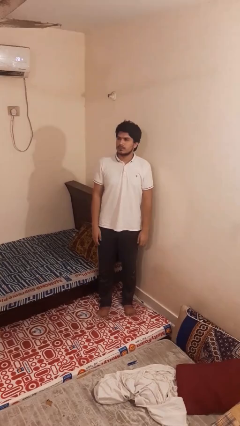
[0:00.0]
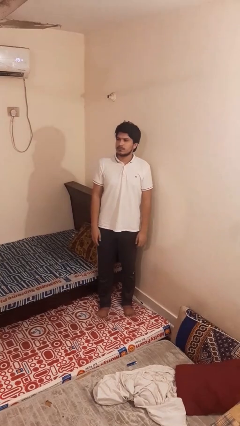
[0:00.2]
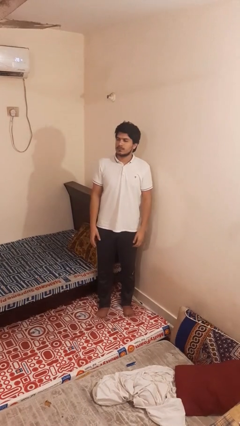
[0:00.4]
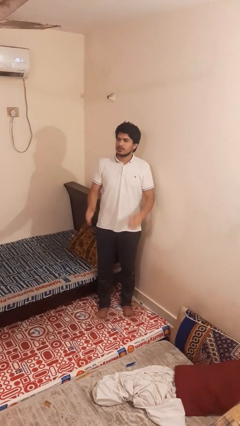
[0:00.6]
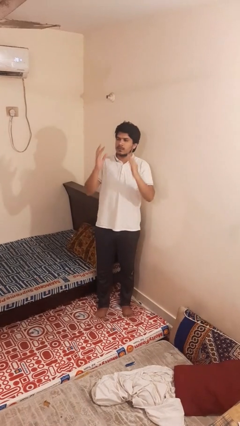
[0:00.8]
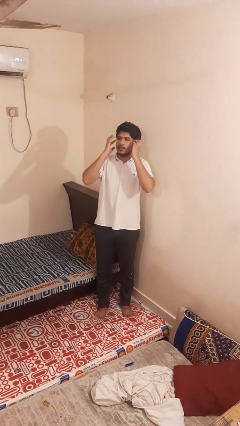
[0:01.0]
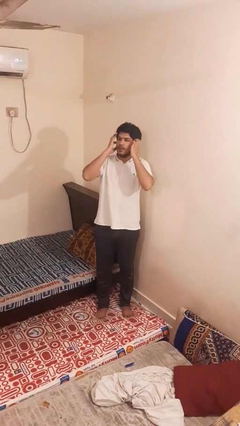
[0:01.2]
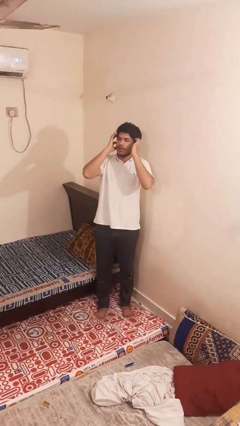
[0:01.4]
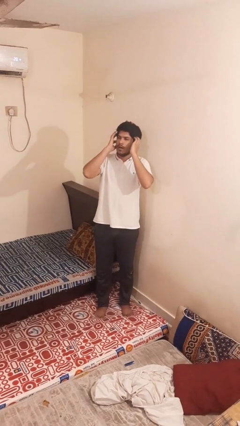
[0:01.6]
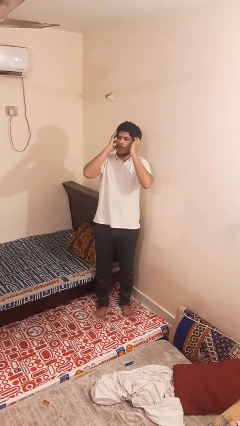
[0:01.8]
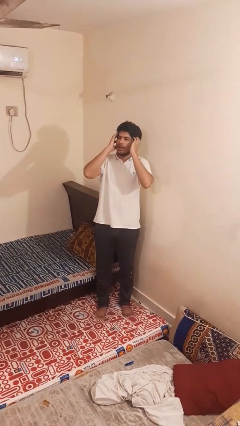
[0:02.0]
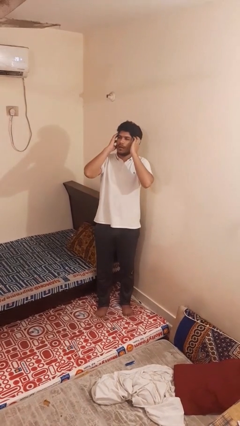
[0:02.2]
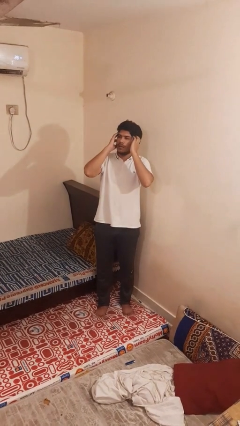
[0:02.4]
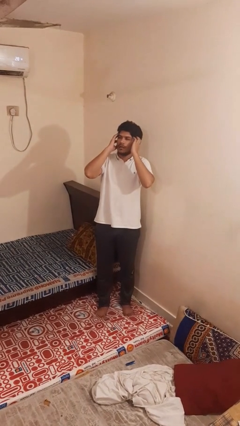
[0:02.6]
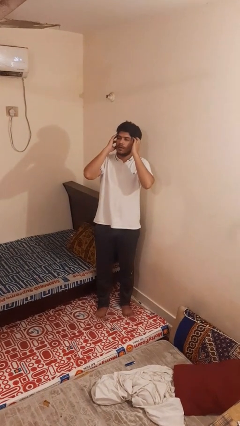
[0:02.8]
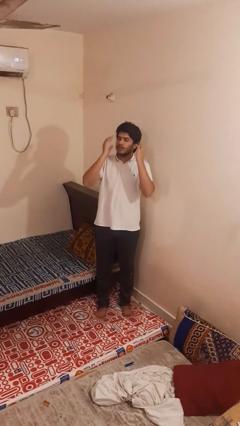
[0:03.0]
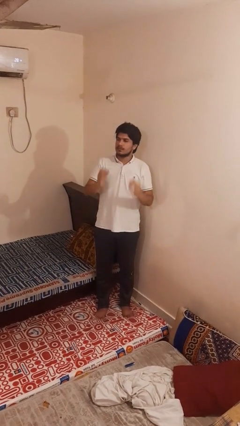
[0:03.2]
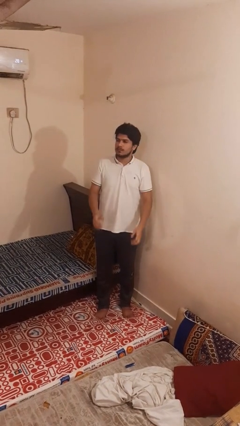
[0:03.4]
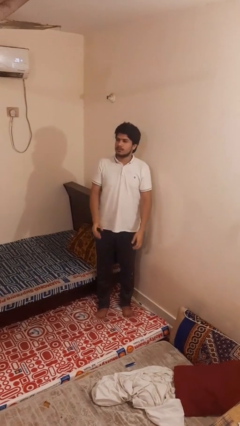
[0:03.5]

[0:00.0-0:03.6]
person puts fingers in ear

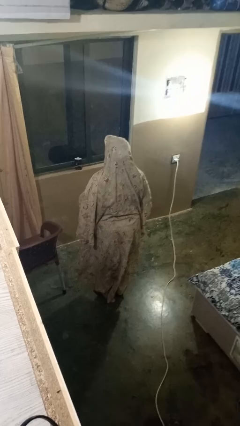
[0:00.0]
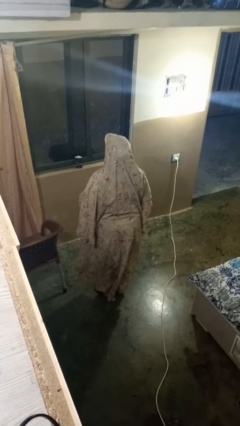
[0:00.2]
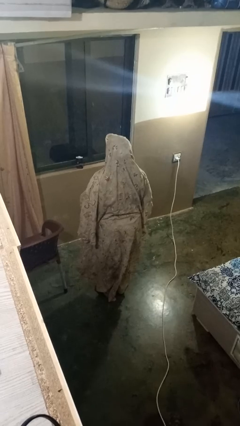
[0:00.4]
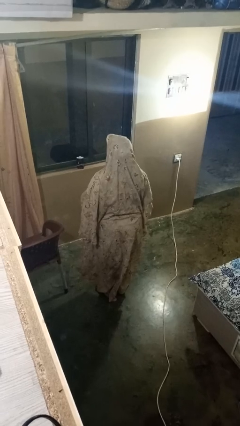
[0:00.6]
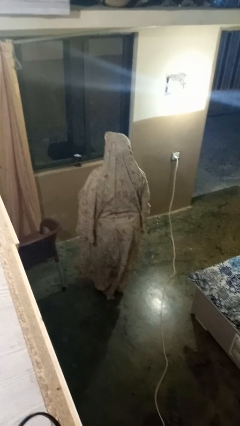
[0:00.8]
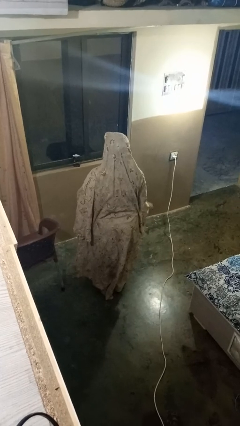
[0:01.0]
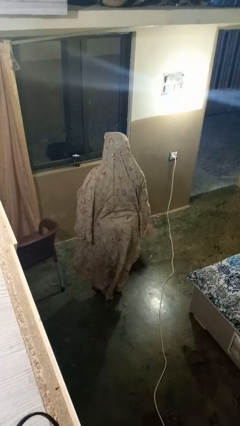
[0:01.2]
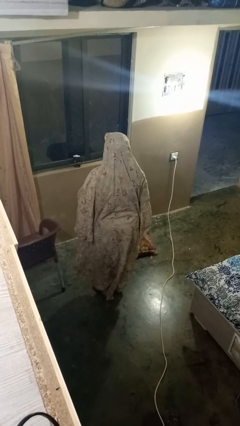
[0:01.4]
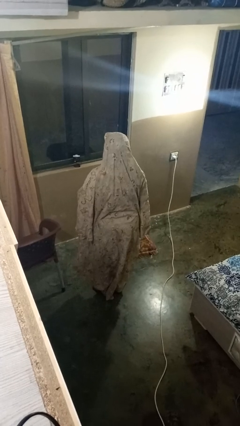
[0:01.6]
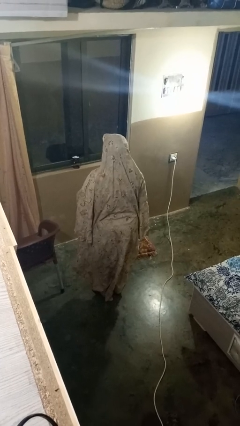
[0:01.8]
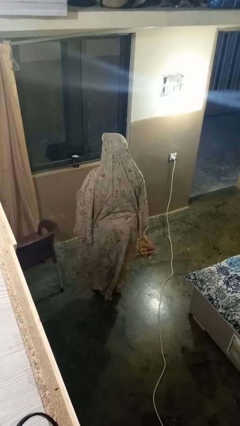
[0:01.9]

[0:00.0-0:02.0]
person drops object

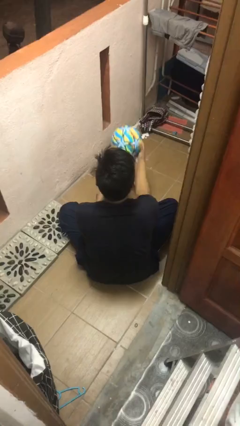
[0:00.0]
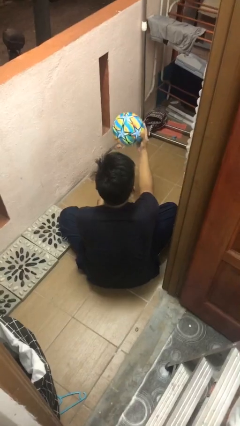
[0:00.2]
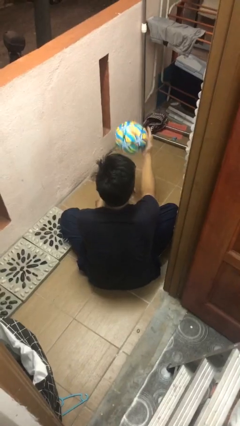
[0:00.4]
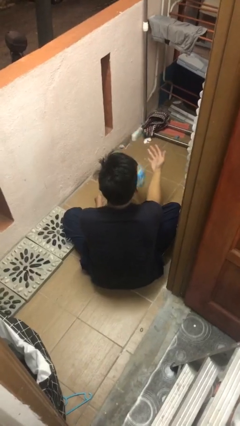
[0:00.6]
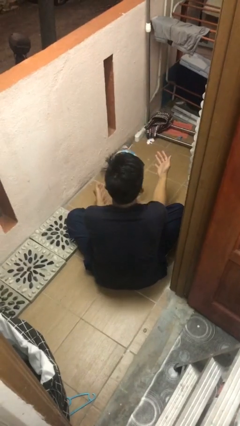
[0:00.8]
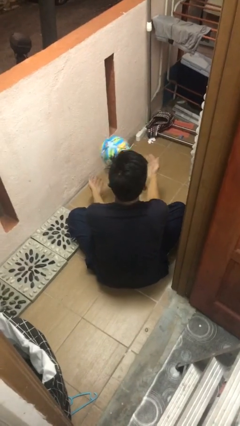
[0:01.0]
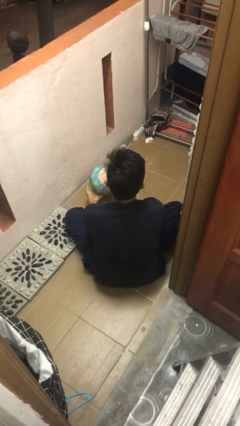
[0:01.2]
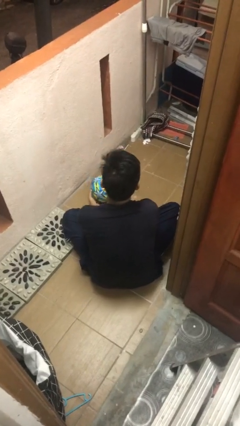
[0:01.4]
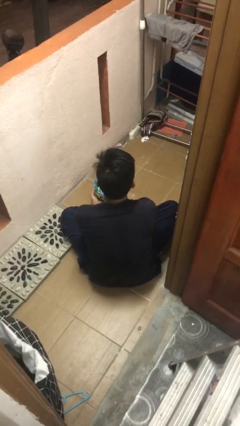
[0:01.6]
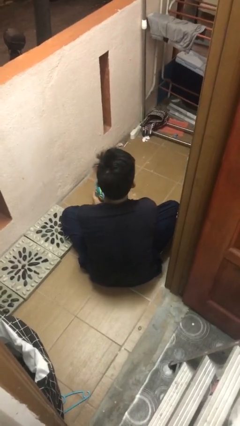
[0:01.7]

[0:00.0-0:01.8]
person bounces ball on floor

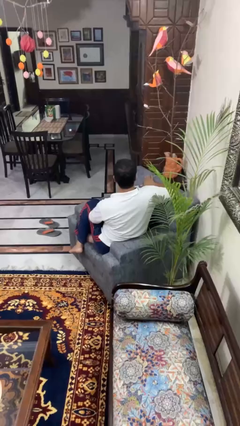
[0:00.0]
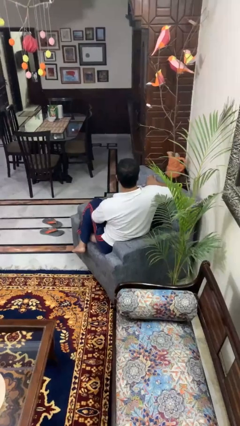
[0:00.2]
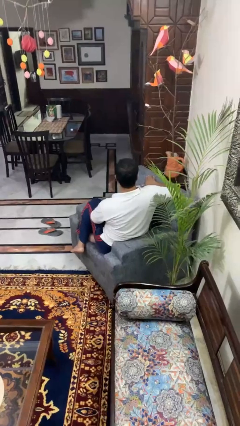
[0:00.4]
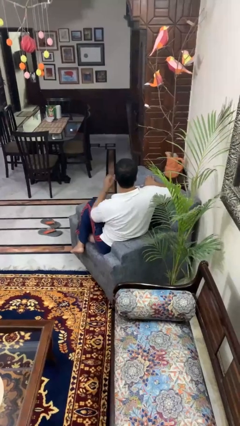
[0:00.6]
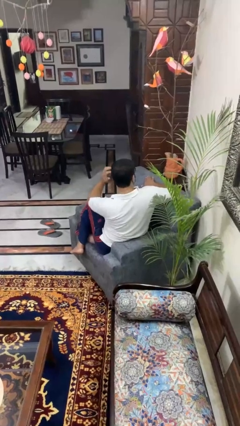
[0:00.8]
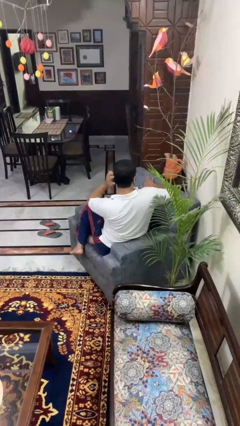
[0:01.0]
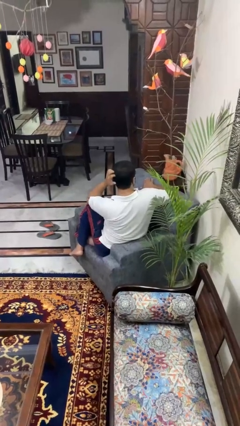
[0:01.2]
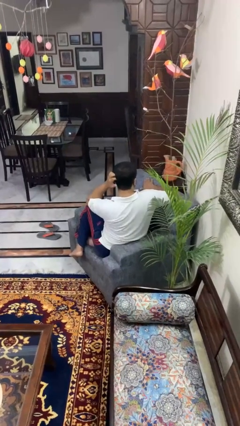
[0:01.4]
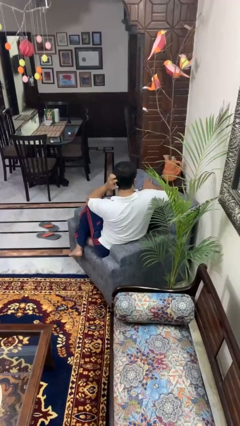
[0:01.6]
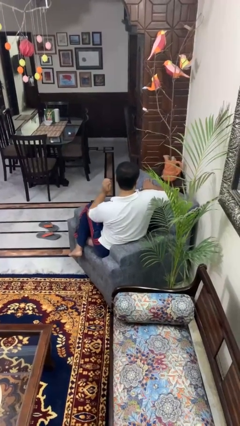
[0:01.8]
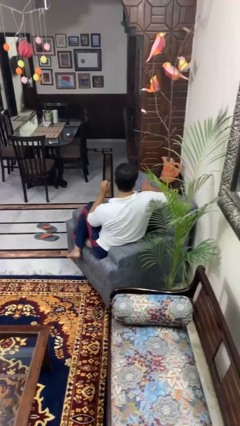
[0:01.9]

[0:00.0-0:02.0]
person scratches face

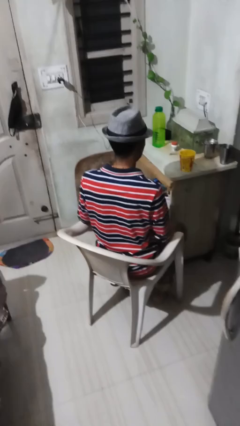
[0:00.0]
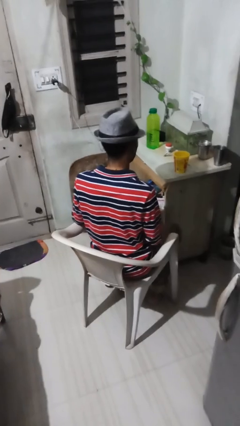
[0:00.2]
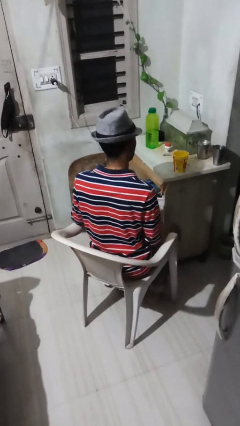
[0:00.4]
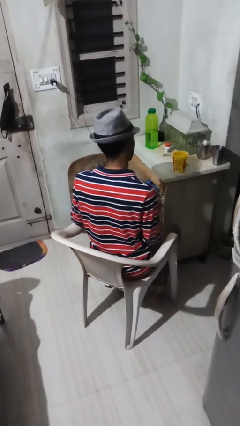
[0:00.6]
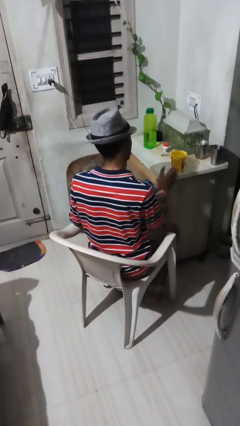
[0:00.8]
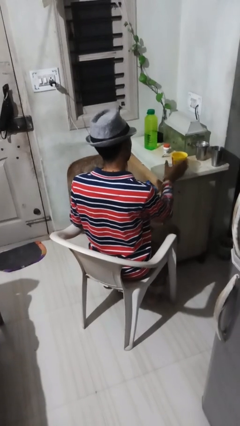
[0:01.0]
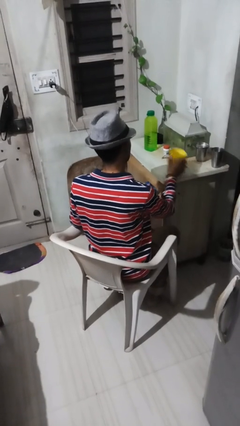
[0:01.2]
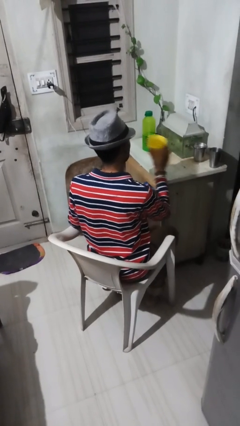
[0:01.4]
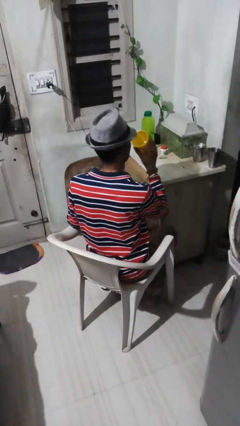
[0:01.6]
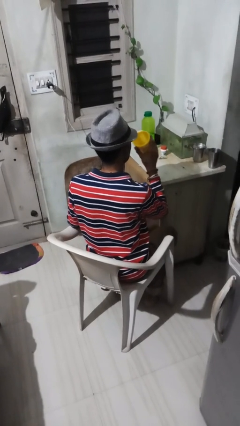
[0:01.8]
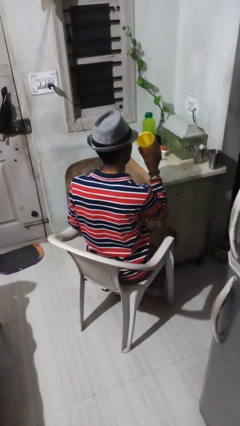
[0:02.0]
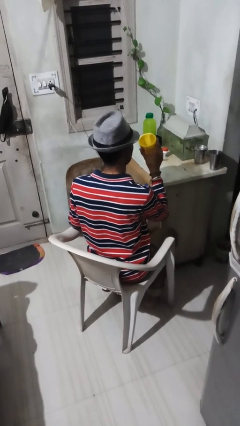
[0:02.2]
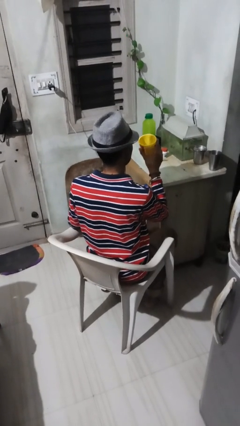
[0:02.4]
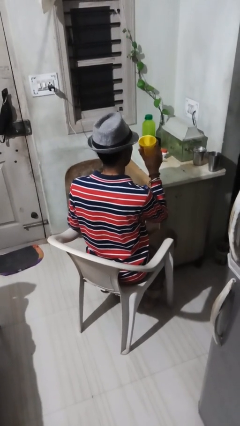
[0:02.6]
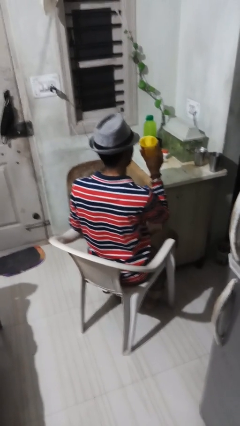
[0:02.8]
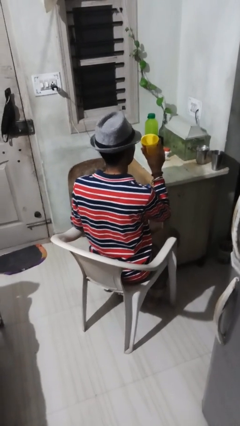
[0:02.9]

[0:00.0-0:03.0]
person picks up object from table

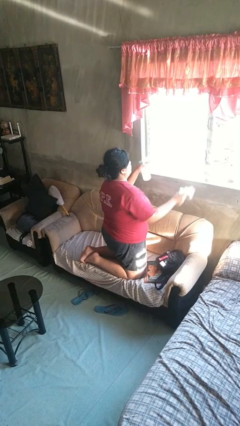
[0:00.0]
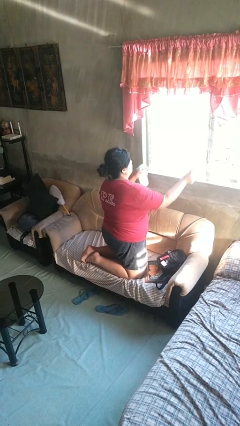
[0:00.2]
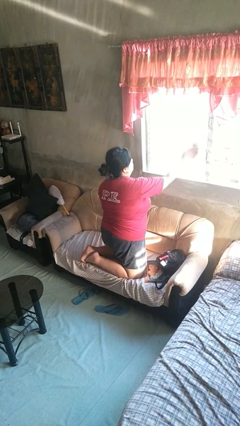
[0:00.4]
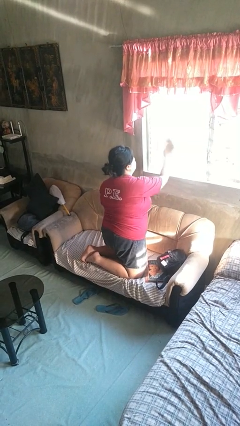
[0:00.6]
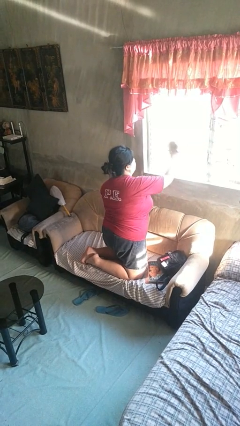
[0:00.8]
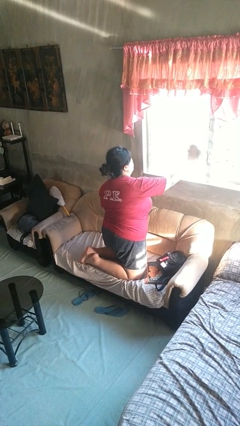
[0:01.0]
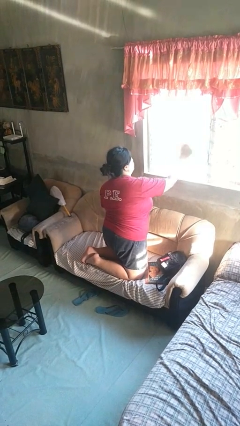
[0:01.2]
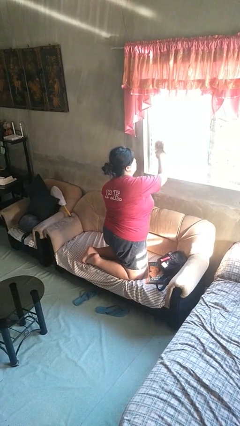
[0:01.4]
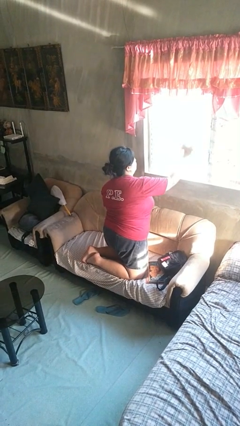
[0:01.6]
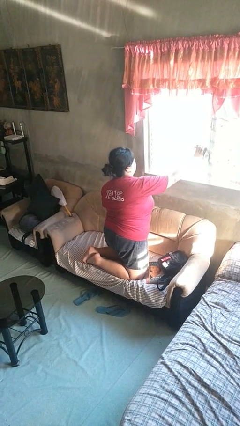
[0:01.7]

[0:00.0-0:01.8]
person washes window

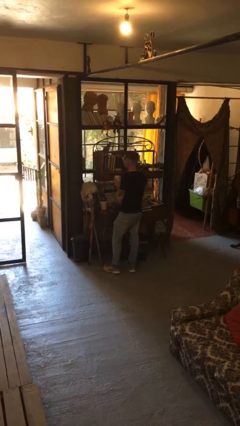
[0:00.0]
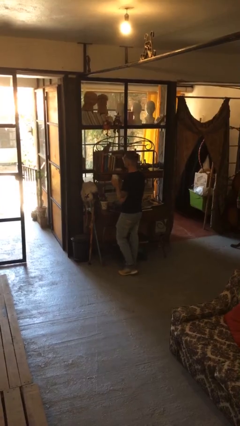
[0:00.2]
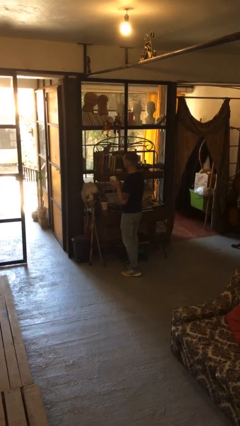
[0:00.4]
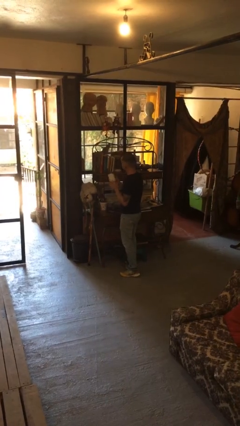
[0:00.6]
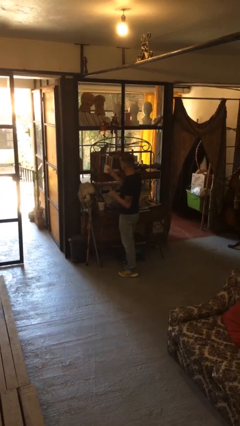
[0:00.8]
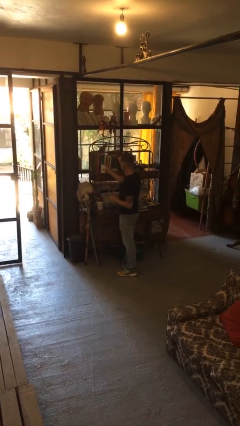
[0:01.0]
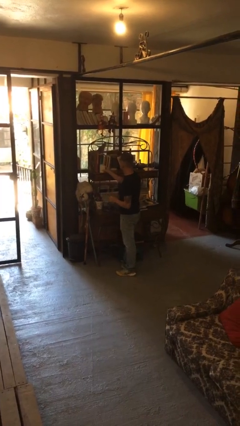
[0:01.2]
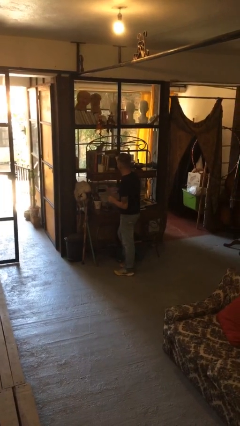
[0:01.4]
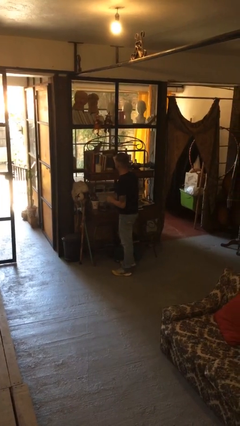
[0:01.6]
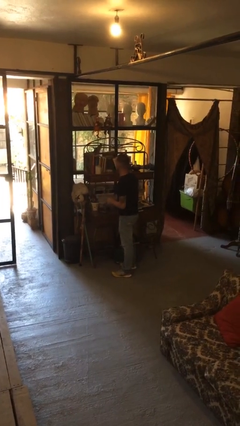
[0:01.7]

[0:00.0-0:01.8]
person puts down object on countertop

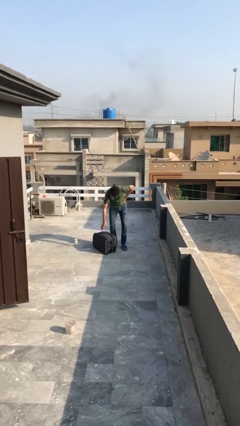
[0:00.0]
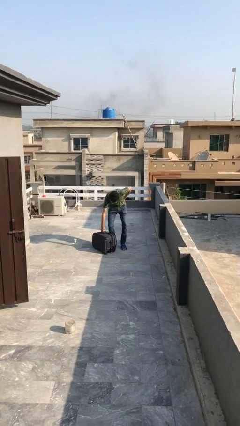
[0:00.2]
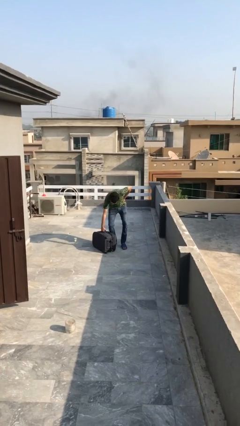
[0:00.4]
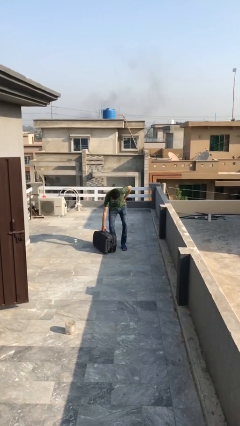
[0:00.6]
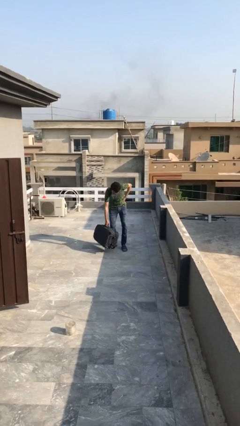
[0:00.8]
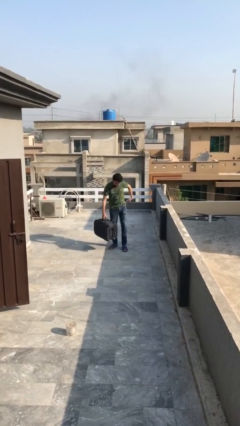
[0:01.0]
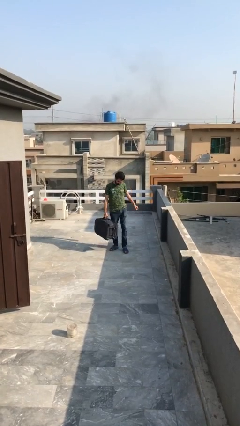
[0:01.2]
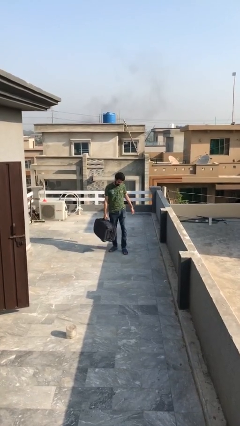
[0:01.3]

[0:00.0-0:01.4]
person picks up object from floor
